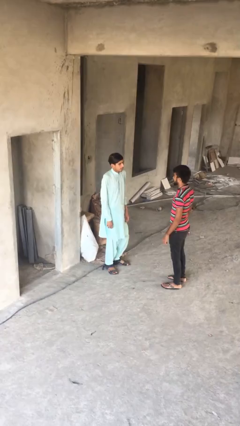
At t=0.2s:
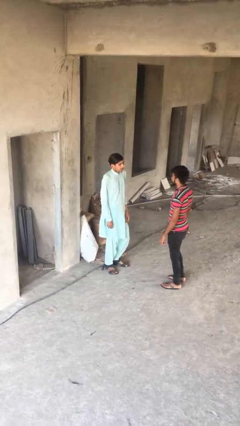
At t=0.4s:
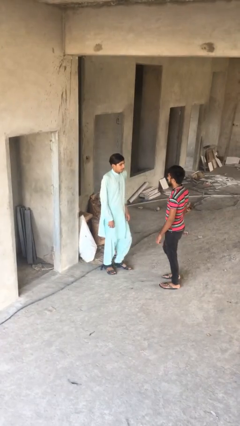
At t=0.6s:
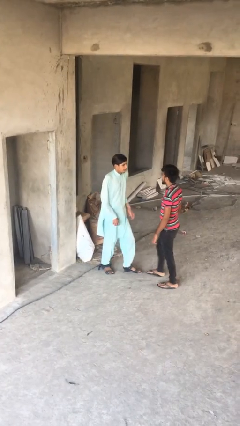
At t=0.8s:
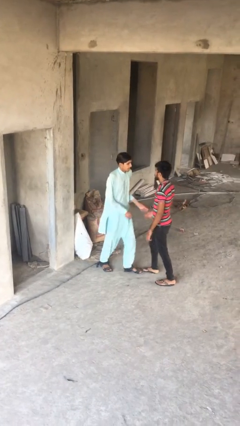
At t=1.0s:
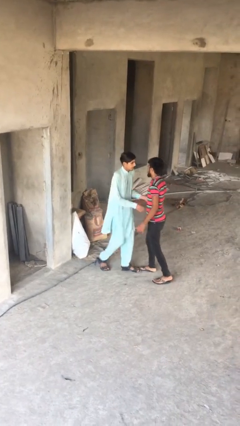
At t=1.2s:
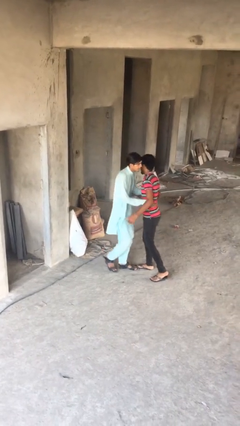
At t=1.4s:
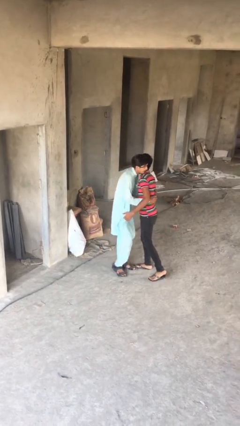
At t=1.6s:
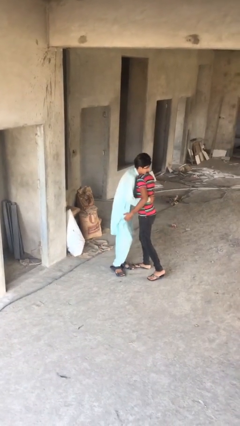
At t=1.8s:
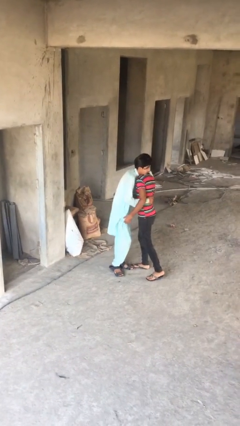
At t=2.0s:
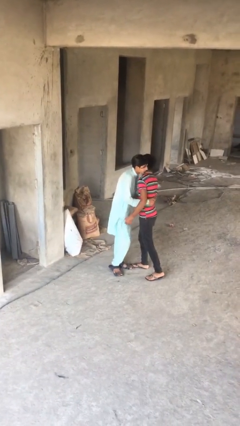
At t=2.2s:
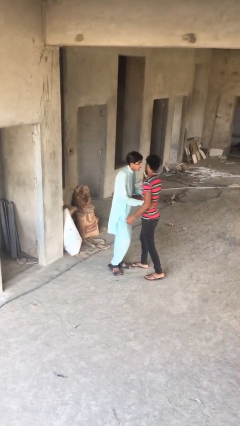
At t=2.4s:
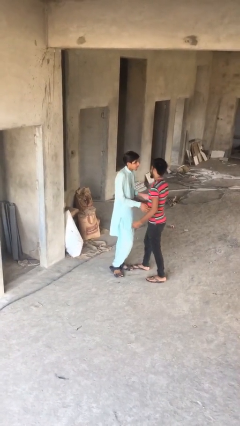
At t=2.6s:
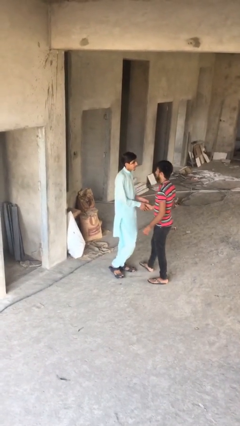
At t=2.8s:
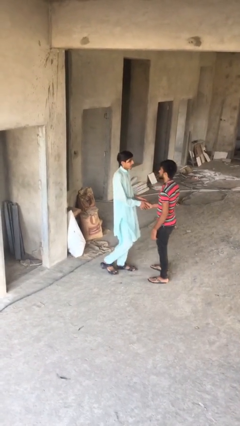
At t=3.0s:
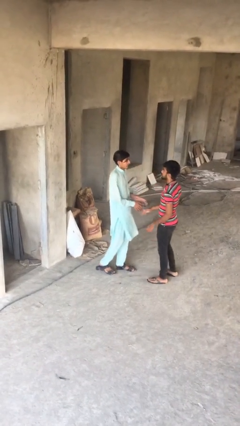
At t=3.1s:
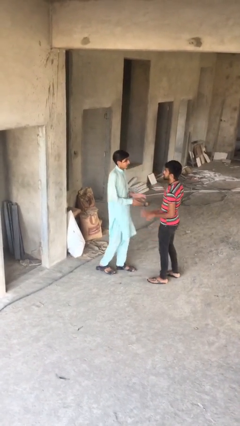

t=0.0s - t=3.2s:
person embraces person

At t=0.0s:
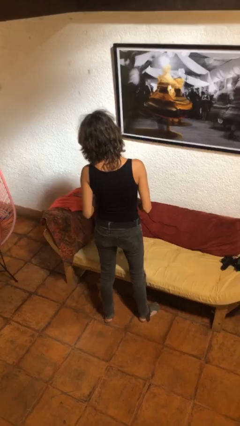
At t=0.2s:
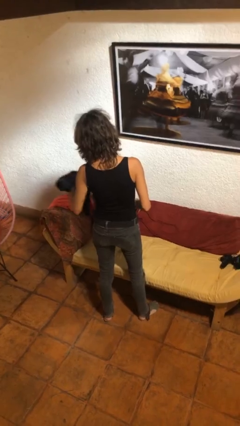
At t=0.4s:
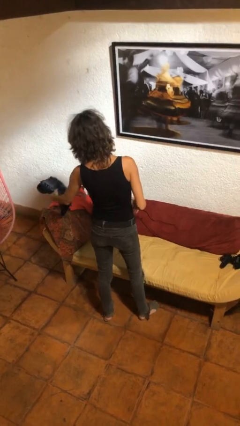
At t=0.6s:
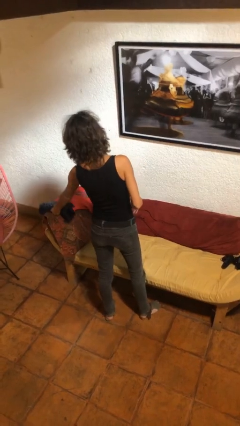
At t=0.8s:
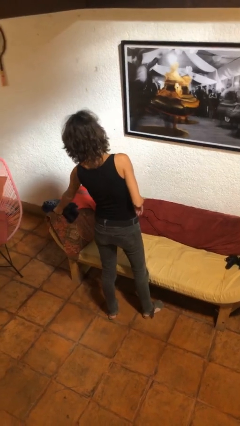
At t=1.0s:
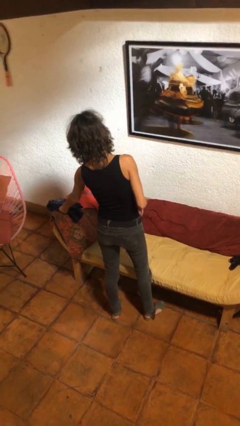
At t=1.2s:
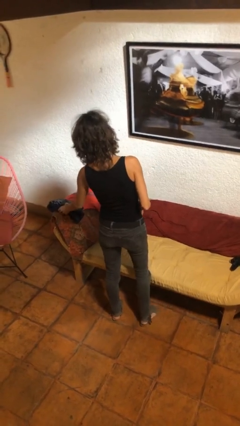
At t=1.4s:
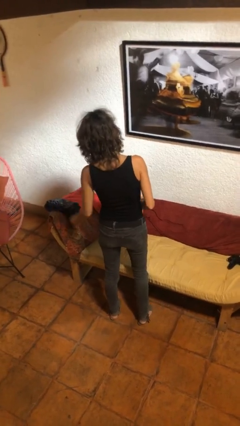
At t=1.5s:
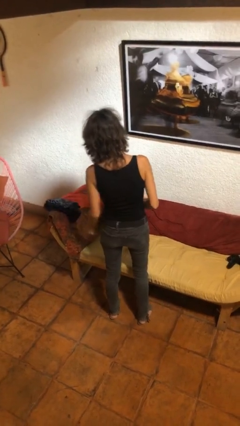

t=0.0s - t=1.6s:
person puts down object on couch

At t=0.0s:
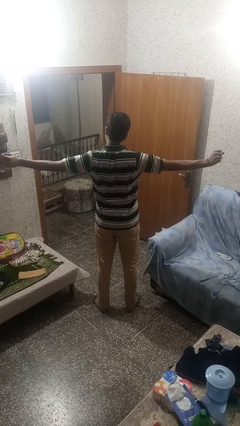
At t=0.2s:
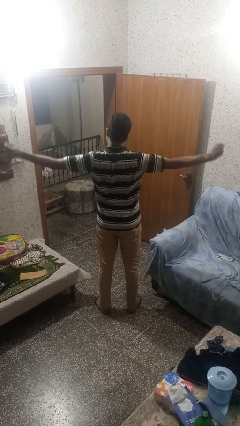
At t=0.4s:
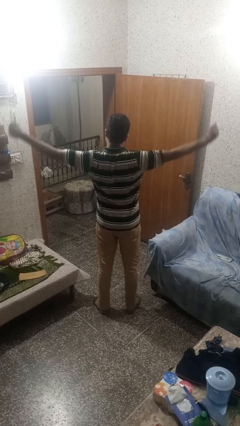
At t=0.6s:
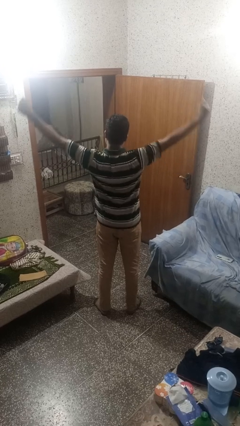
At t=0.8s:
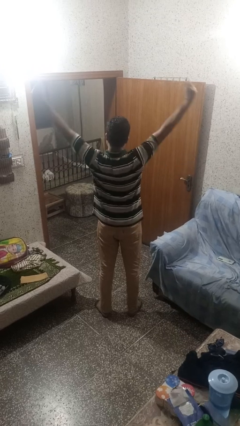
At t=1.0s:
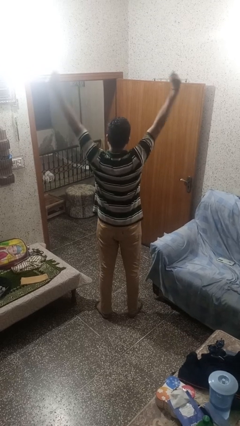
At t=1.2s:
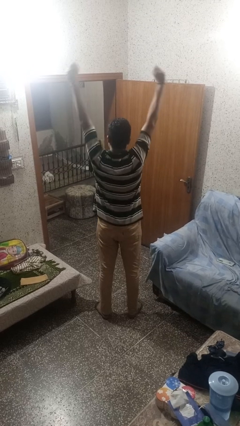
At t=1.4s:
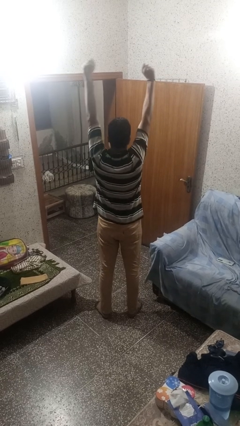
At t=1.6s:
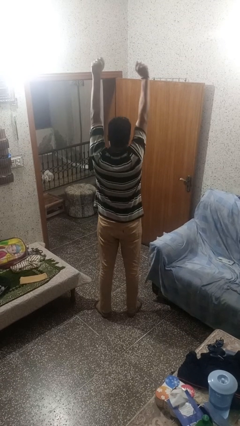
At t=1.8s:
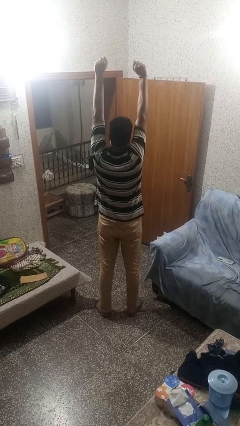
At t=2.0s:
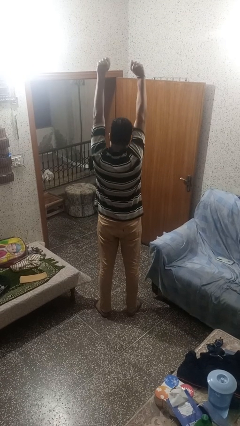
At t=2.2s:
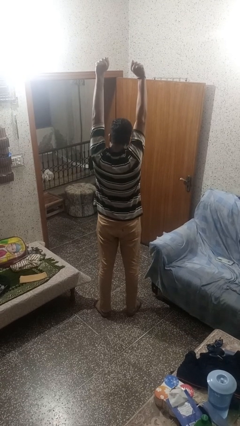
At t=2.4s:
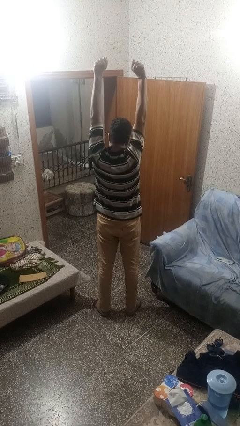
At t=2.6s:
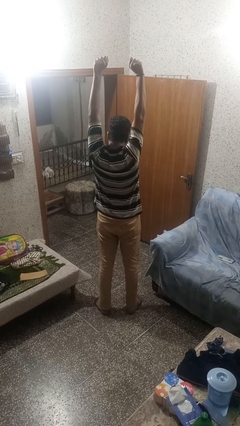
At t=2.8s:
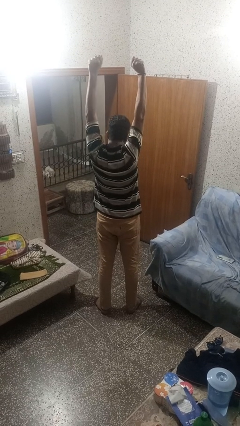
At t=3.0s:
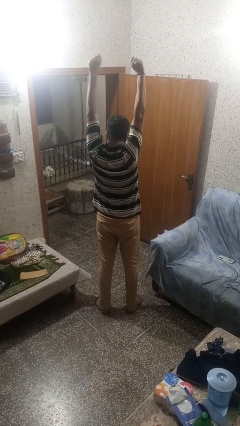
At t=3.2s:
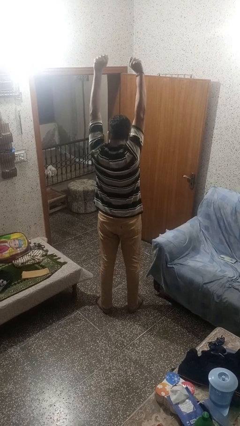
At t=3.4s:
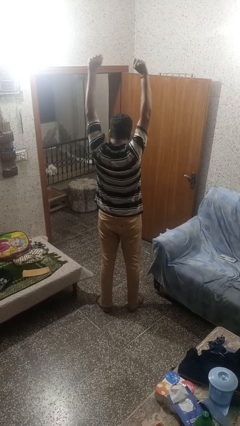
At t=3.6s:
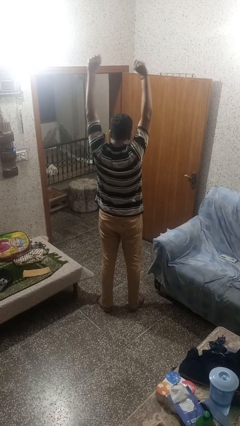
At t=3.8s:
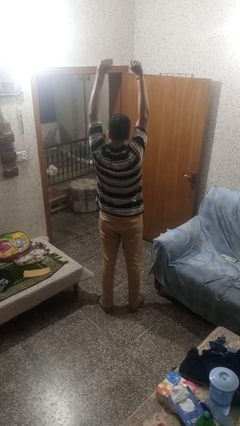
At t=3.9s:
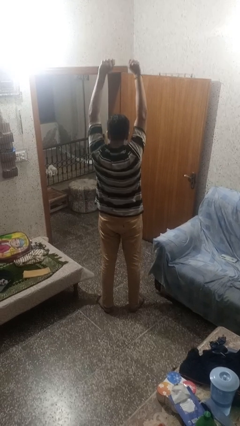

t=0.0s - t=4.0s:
person stretches arms over head

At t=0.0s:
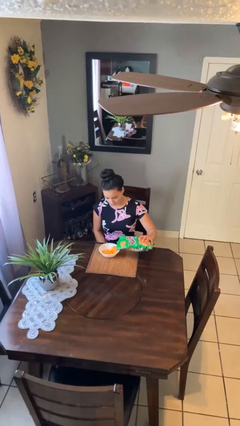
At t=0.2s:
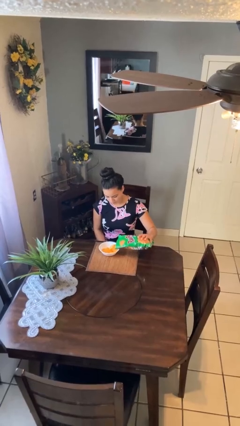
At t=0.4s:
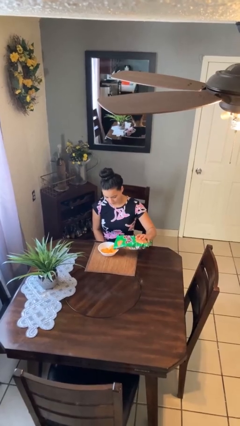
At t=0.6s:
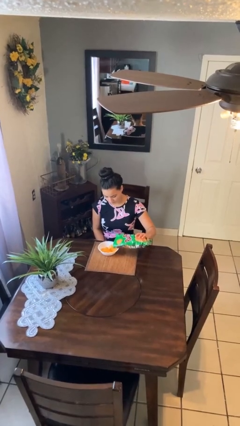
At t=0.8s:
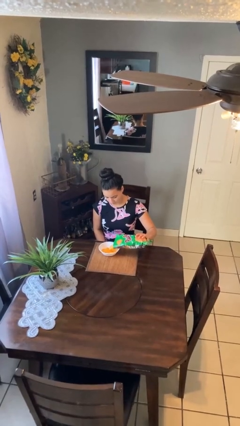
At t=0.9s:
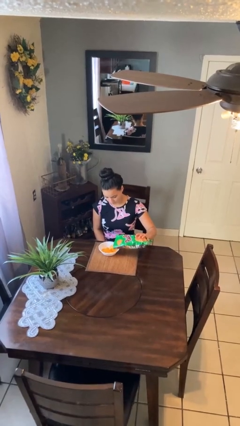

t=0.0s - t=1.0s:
person pours into bowl

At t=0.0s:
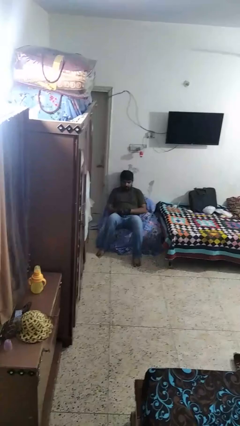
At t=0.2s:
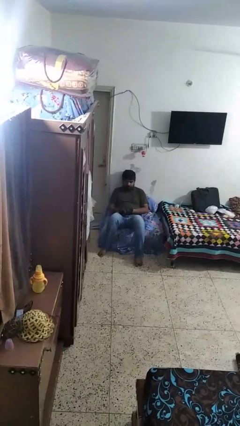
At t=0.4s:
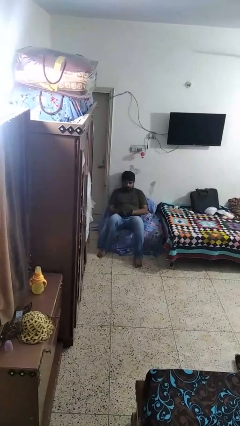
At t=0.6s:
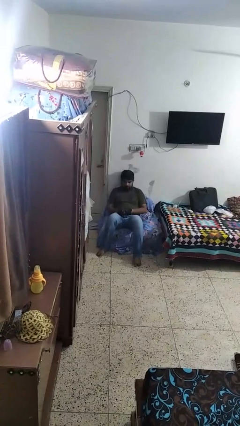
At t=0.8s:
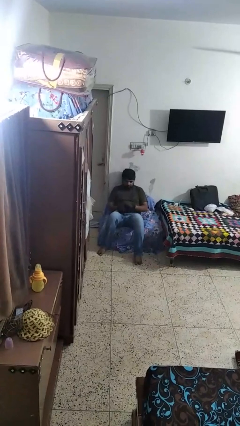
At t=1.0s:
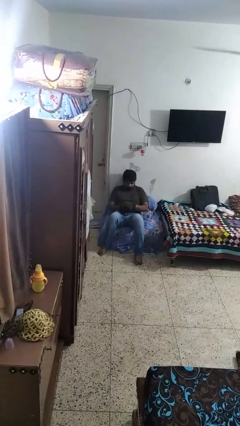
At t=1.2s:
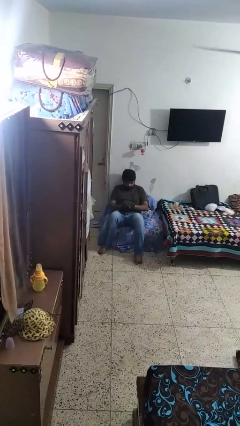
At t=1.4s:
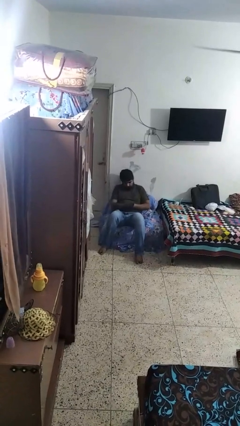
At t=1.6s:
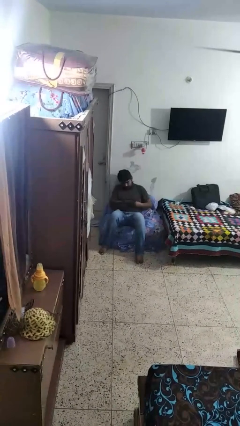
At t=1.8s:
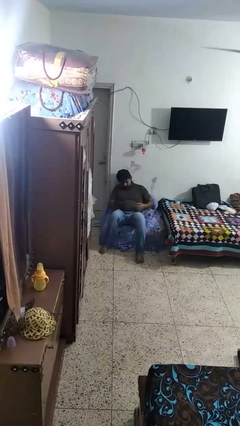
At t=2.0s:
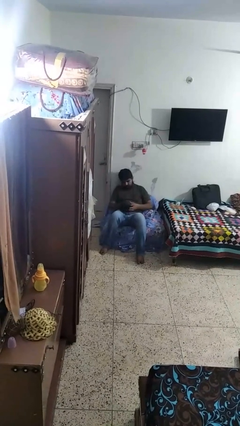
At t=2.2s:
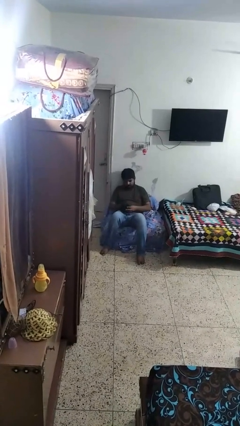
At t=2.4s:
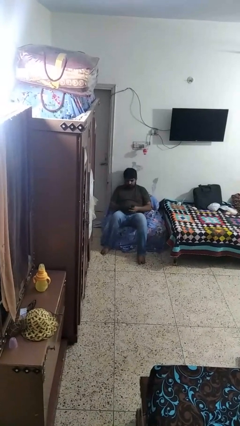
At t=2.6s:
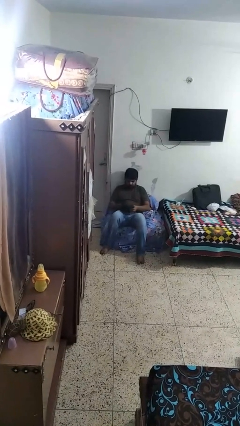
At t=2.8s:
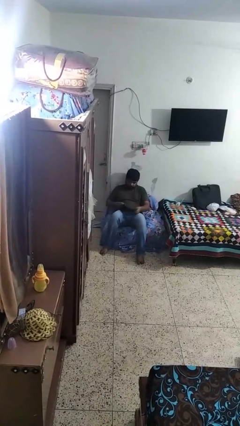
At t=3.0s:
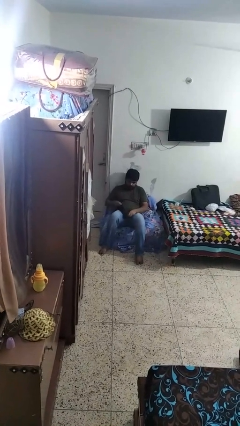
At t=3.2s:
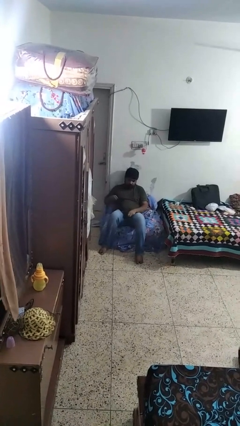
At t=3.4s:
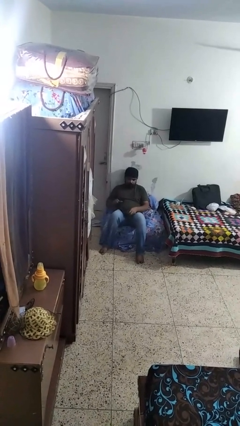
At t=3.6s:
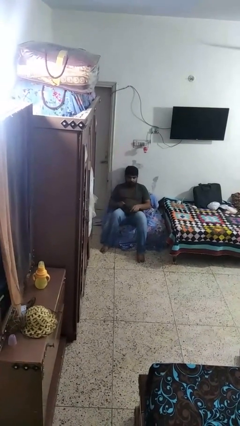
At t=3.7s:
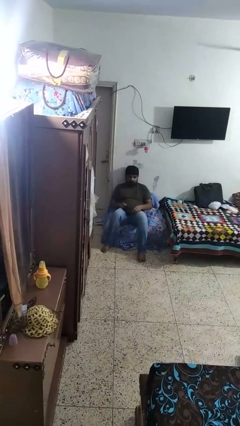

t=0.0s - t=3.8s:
person takes off gloves

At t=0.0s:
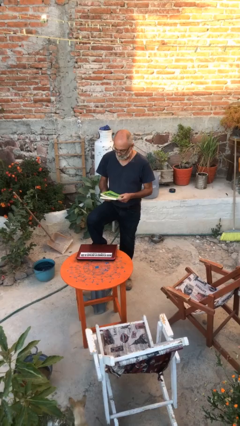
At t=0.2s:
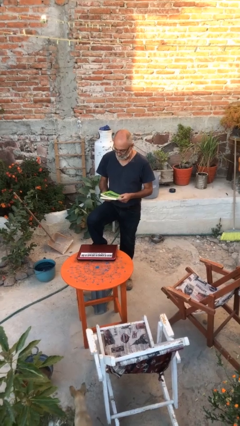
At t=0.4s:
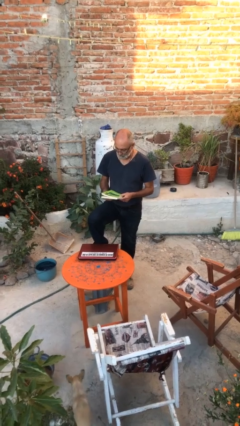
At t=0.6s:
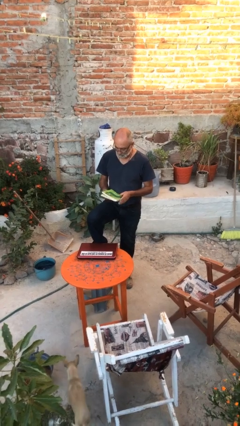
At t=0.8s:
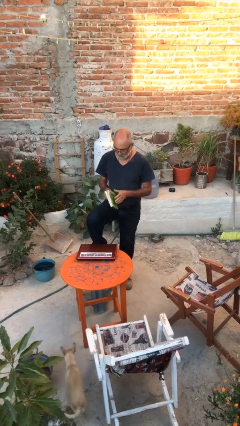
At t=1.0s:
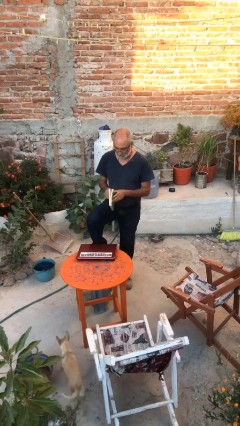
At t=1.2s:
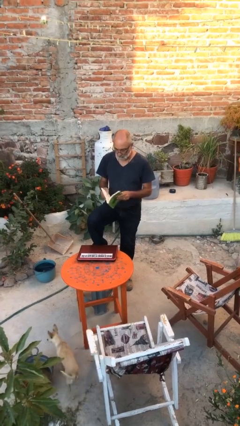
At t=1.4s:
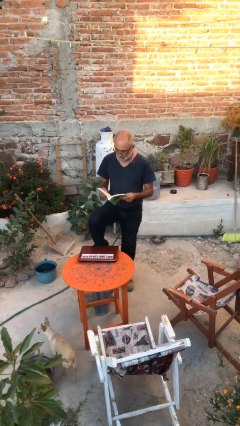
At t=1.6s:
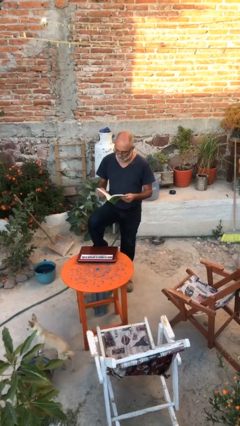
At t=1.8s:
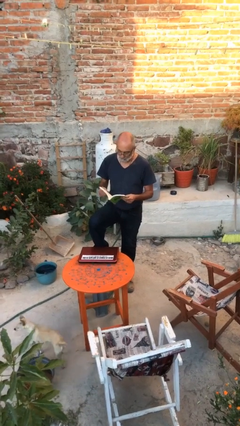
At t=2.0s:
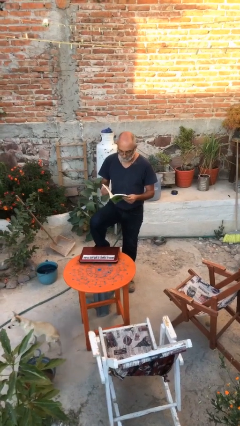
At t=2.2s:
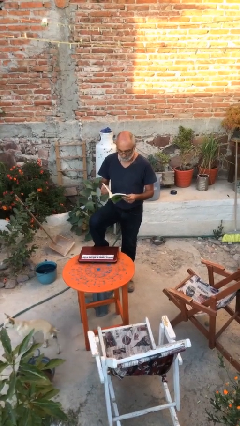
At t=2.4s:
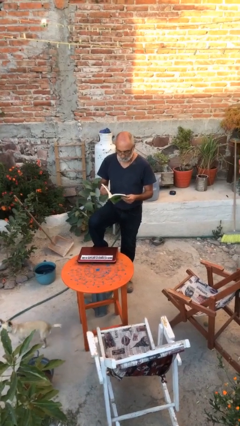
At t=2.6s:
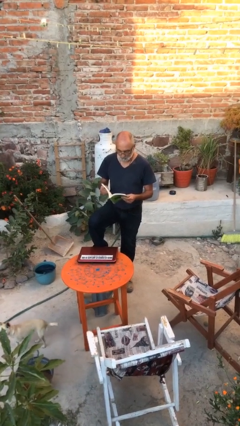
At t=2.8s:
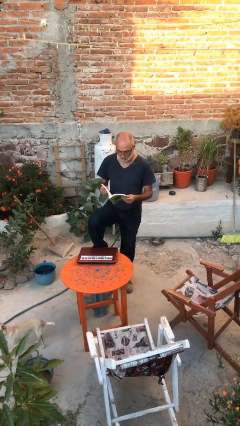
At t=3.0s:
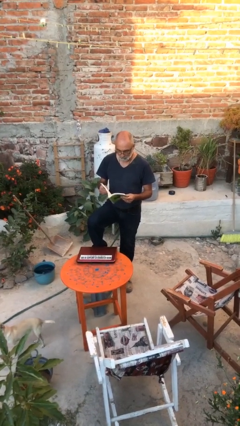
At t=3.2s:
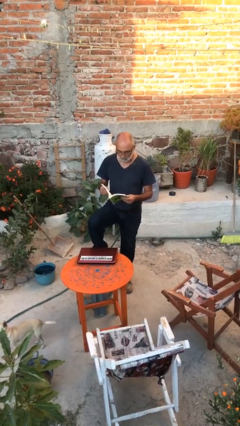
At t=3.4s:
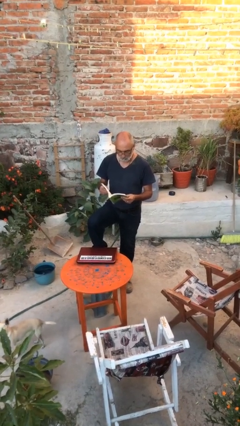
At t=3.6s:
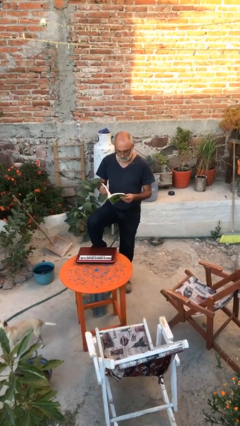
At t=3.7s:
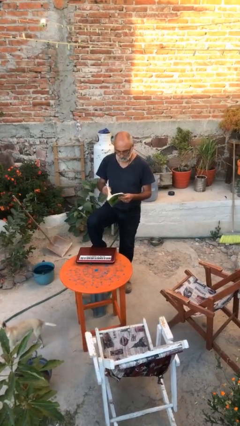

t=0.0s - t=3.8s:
person reads document

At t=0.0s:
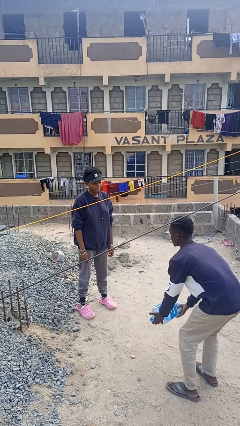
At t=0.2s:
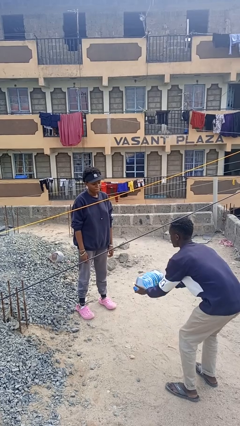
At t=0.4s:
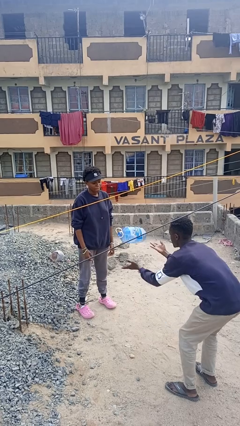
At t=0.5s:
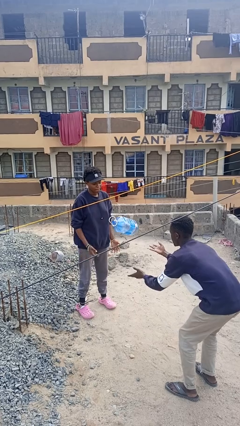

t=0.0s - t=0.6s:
person throws object to person
